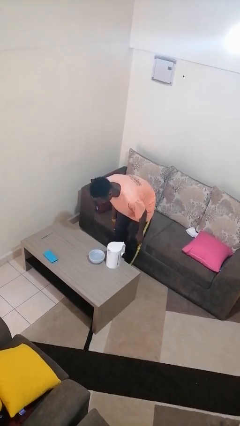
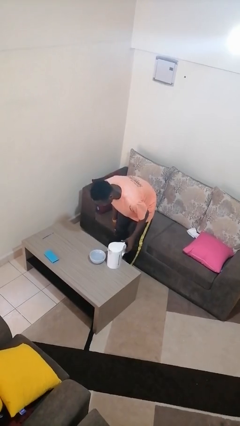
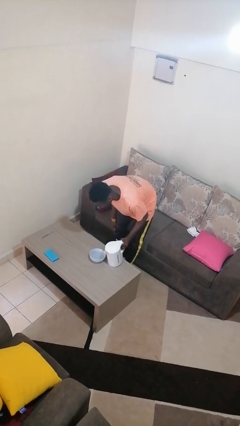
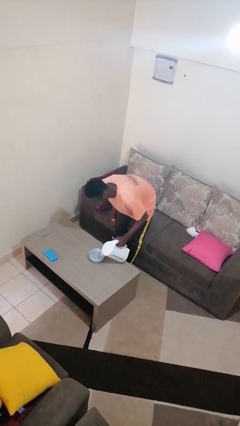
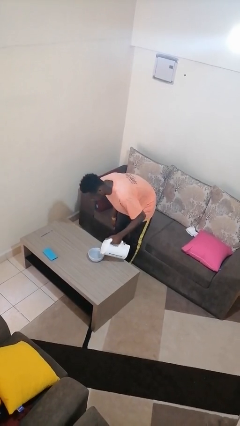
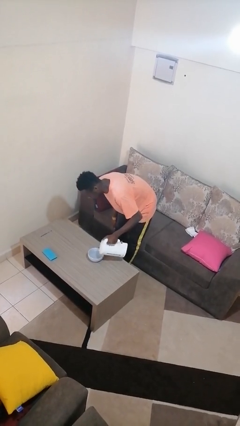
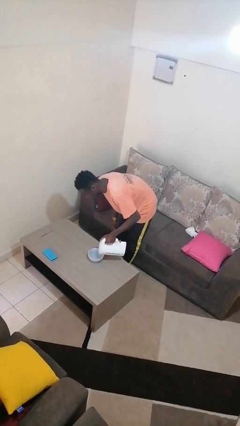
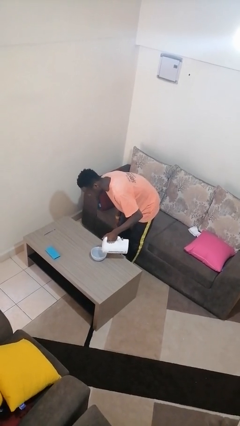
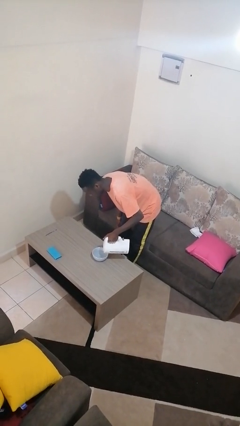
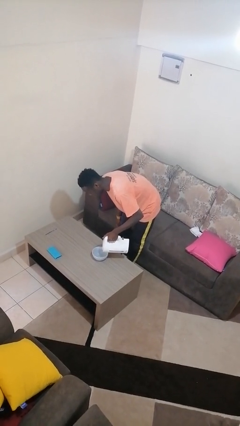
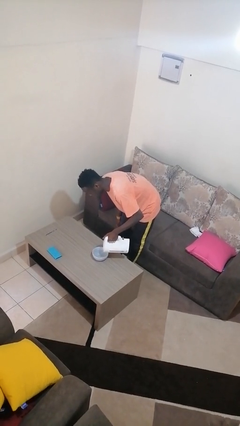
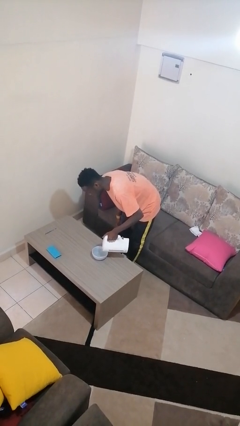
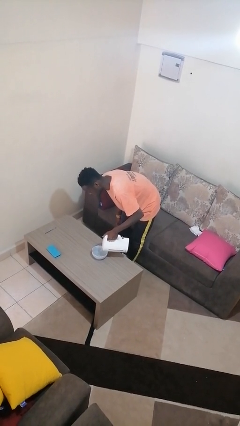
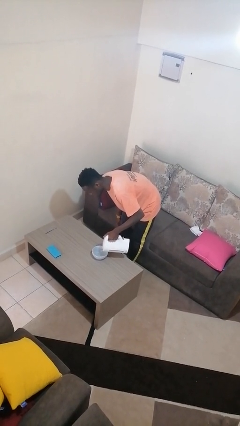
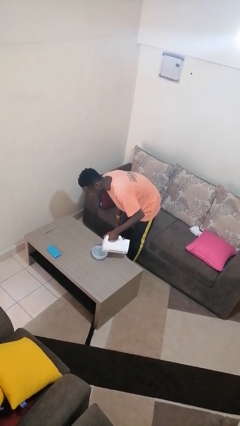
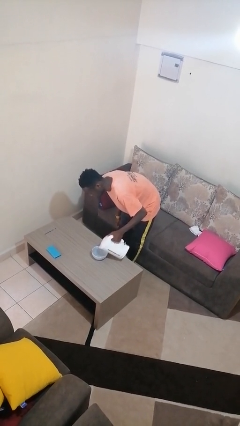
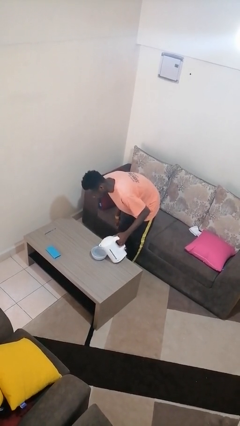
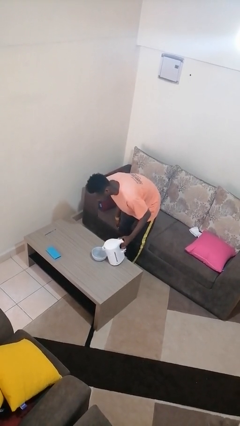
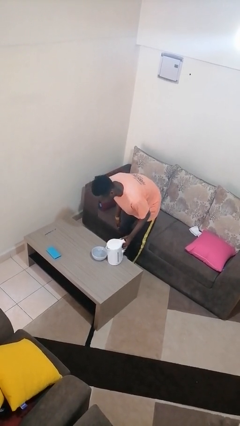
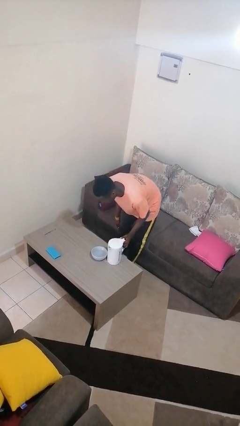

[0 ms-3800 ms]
person pours into bowl

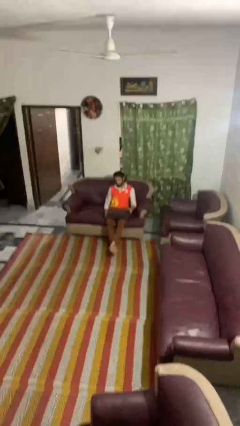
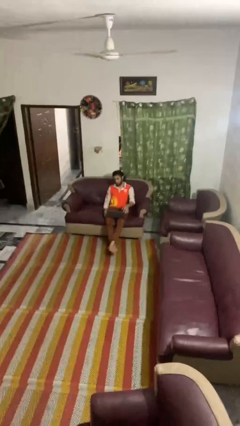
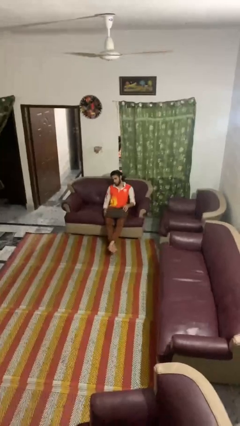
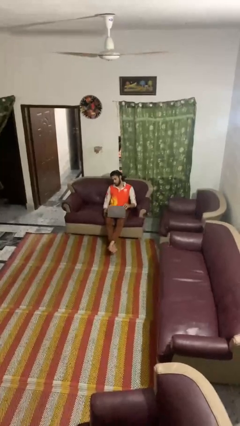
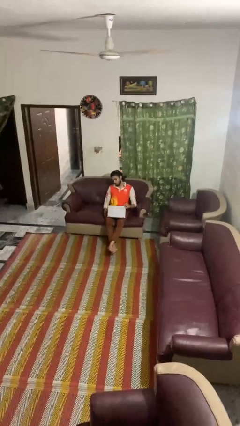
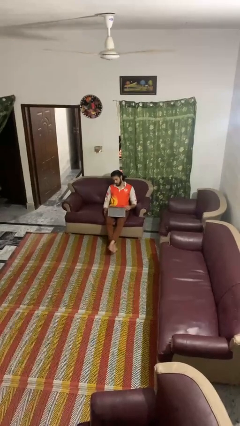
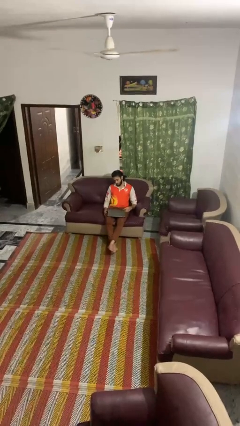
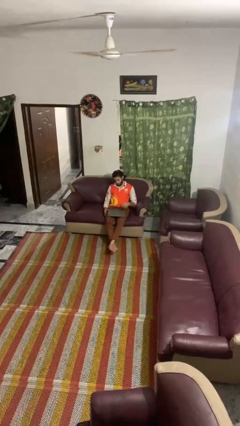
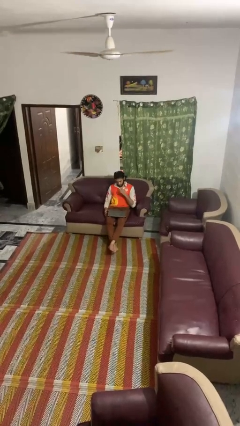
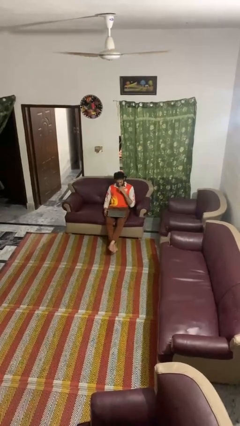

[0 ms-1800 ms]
person closes laptop

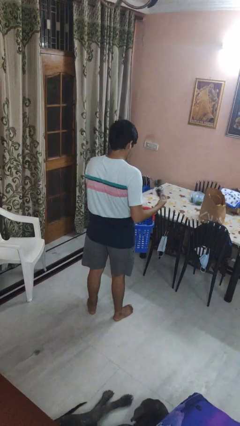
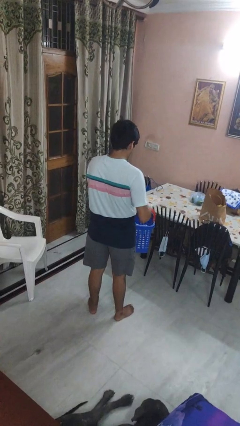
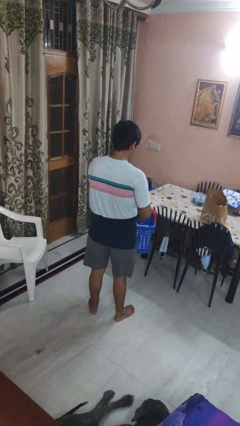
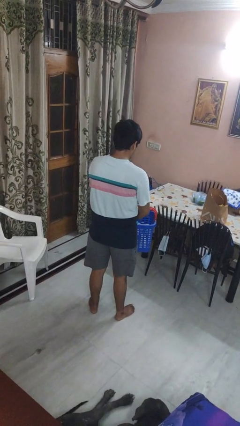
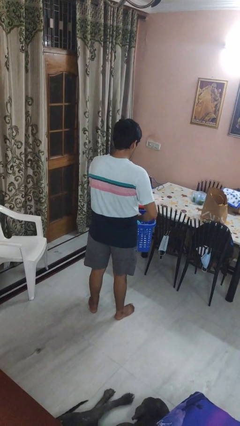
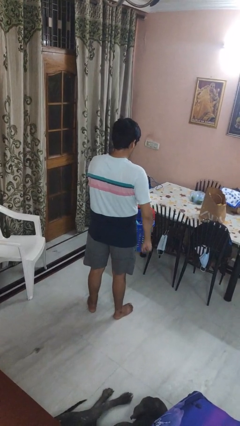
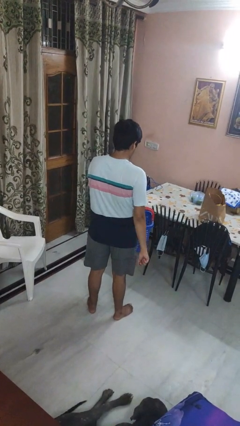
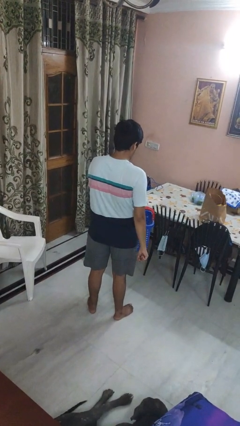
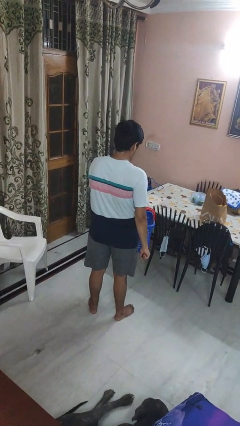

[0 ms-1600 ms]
person puts object into basket

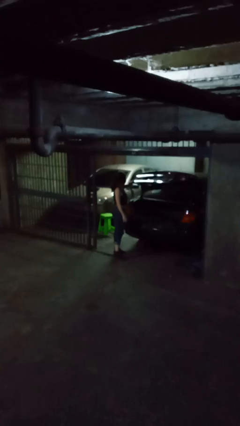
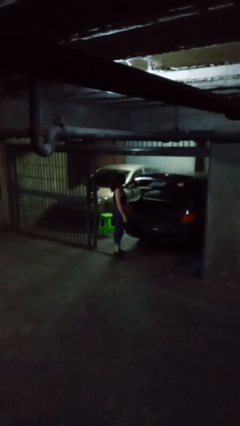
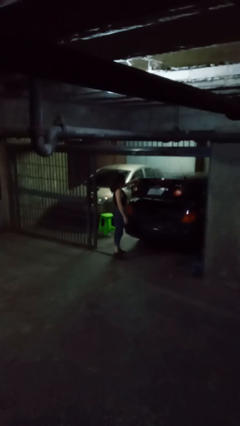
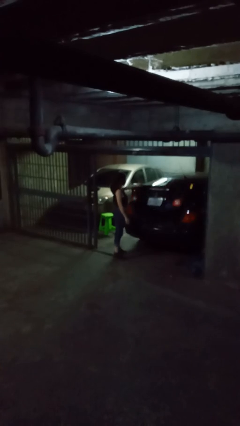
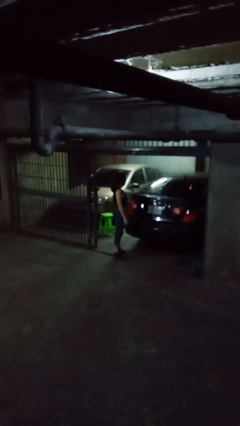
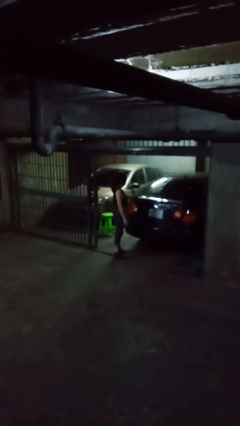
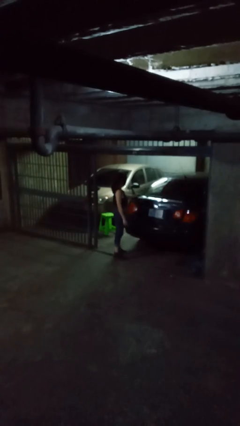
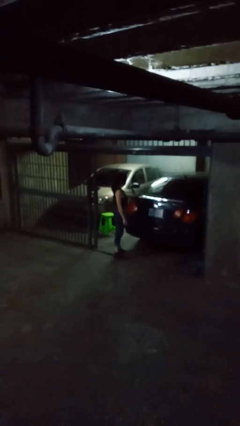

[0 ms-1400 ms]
person closes car trunk

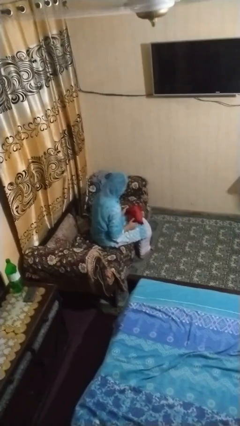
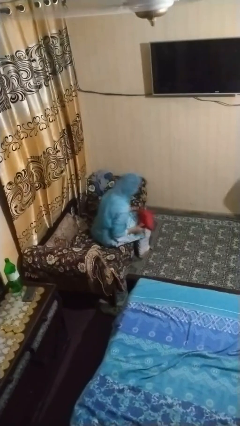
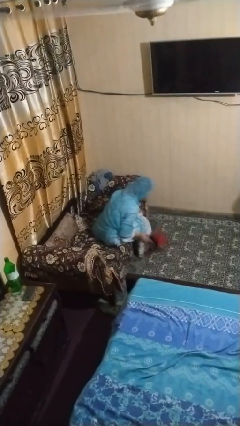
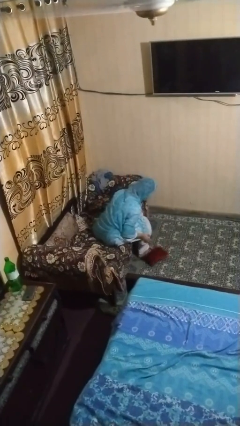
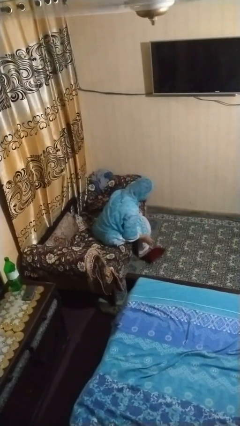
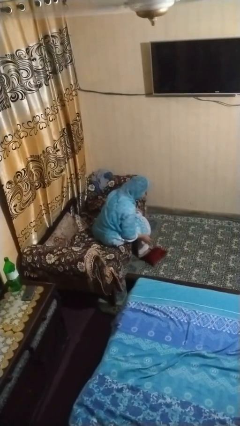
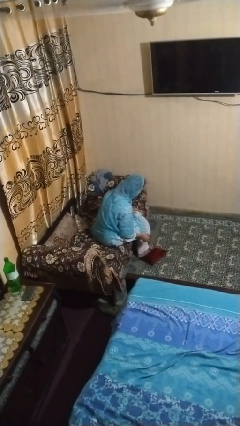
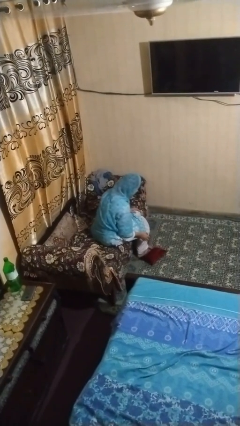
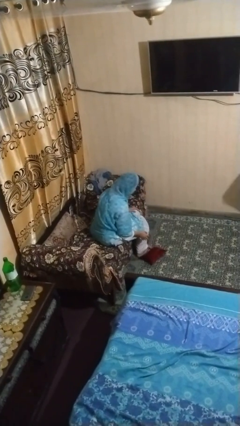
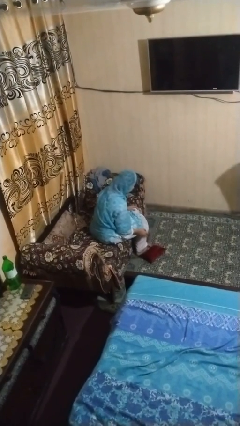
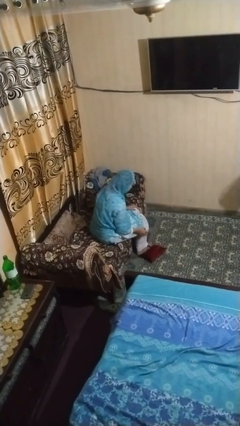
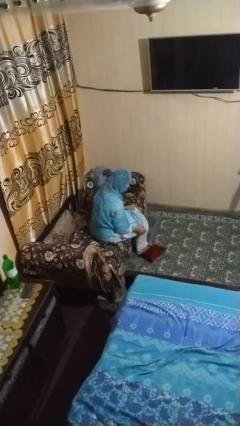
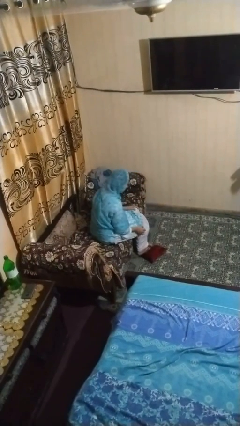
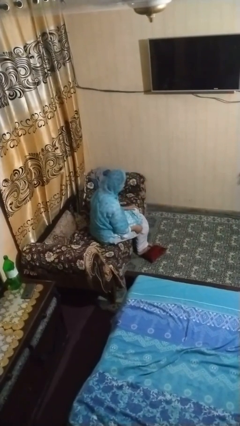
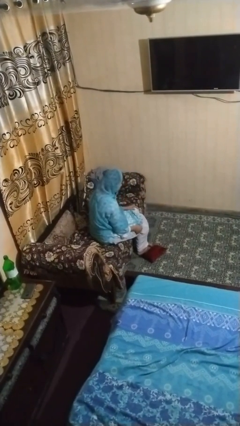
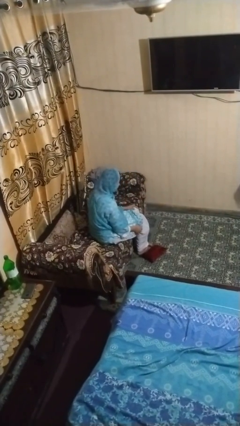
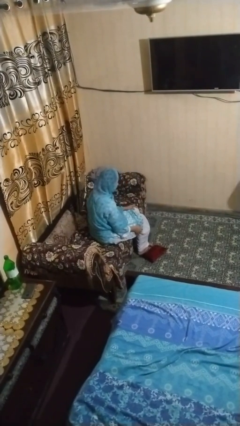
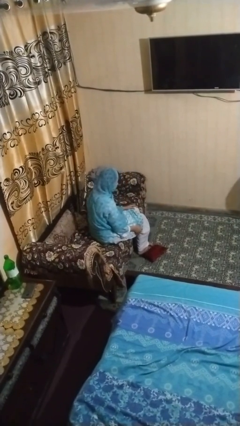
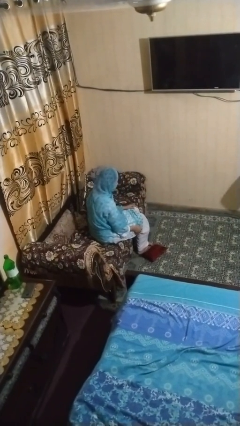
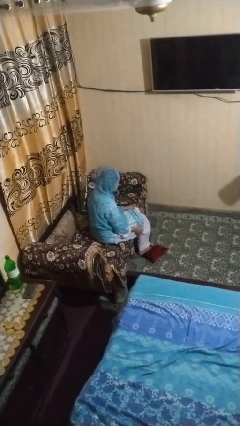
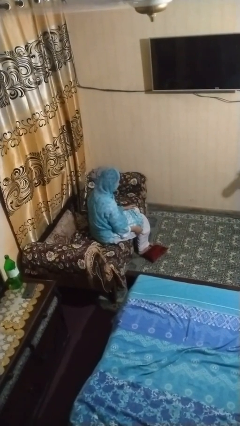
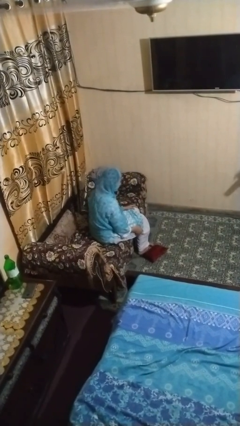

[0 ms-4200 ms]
person drops object

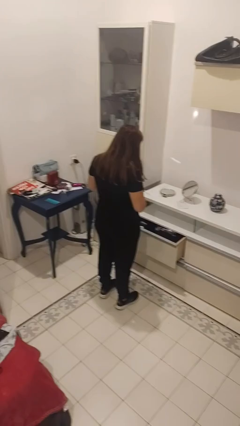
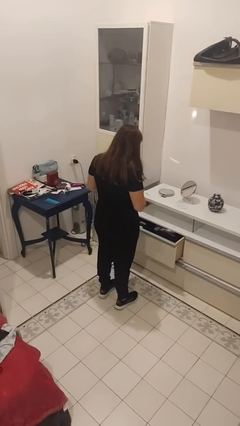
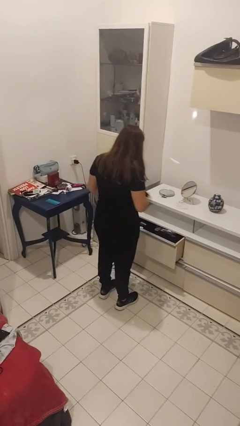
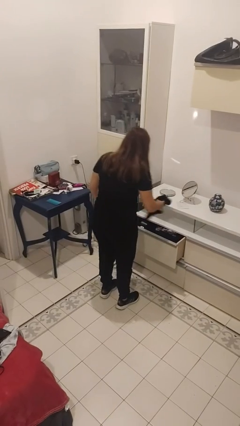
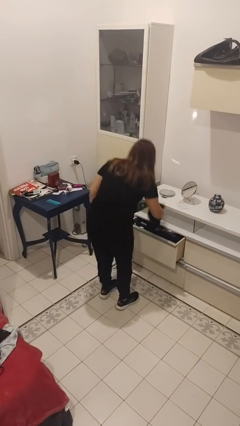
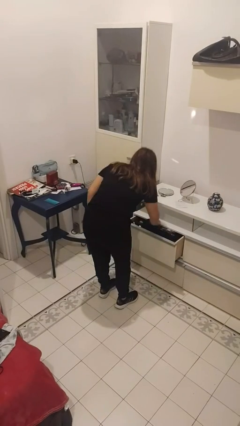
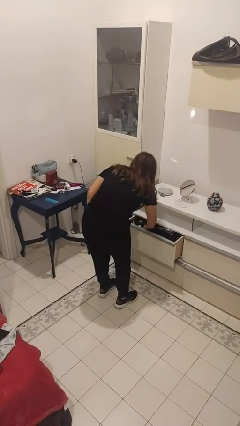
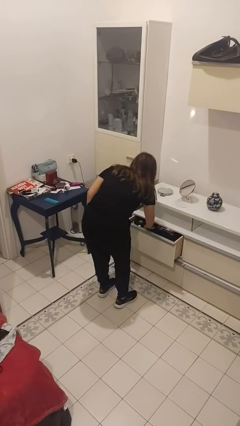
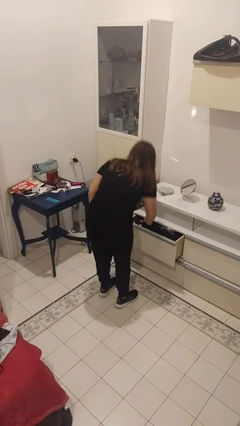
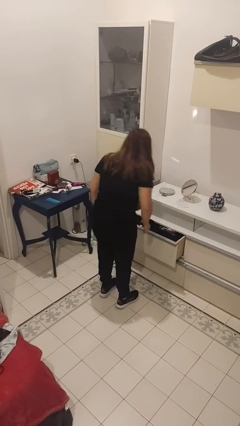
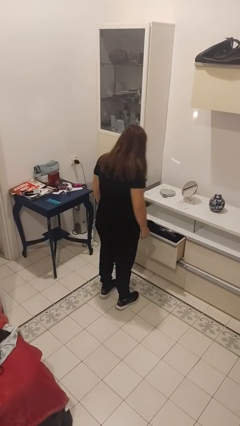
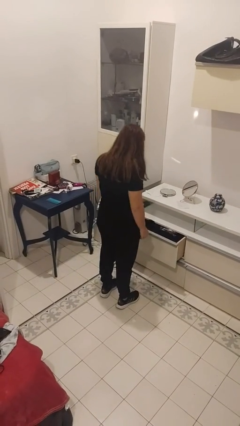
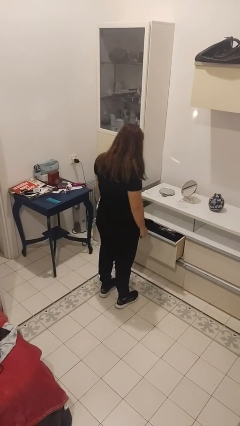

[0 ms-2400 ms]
person puts clothes into dresser

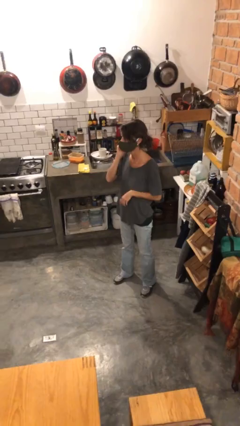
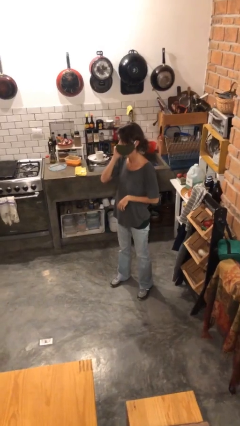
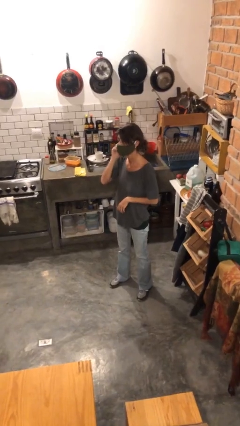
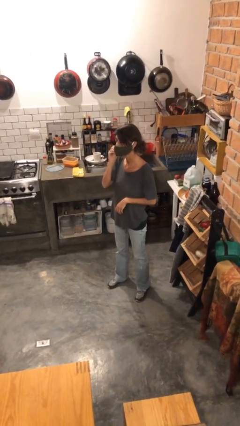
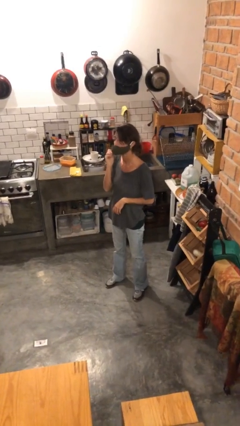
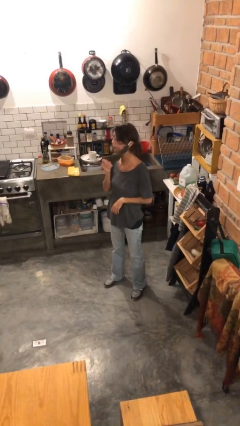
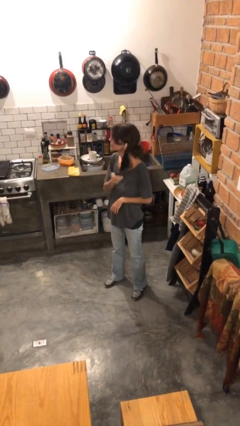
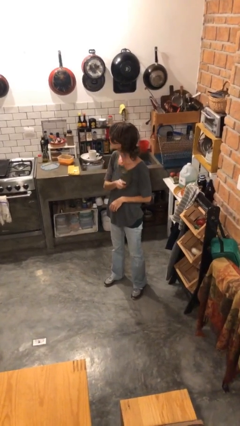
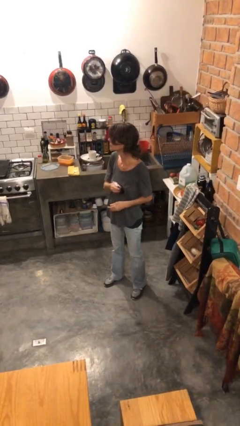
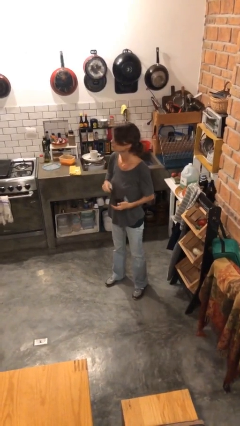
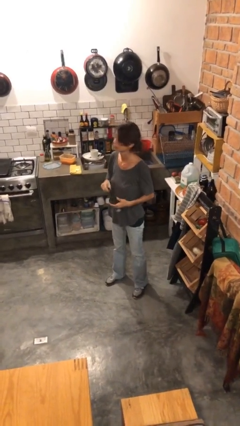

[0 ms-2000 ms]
person takes off facemask
